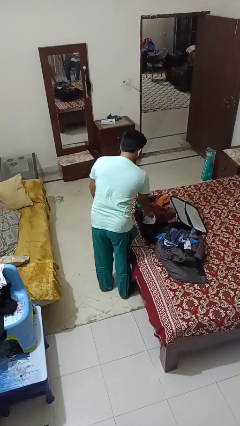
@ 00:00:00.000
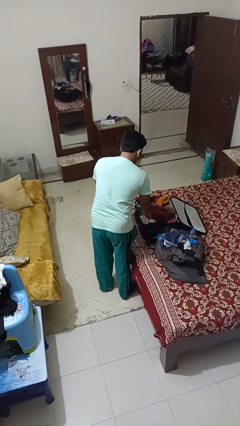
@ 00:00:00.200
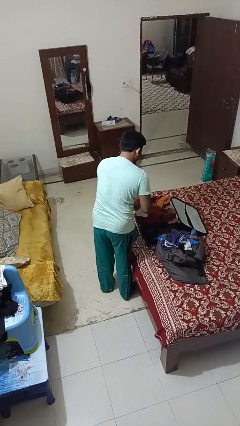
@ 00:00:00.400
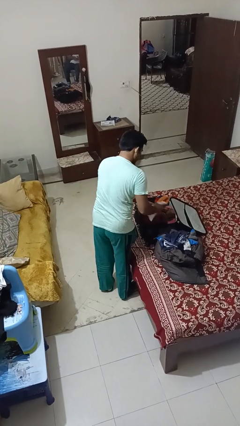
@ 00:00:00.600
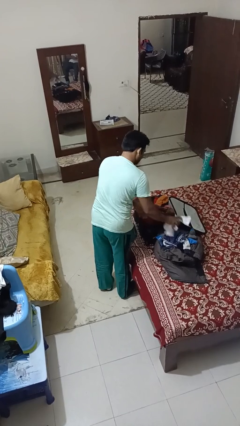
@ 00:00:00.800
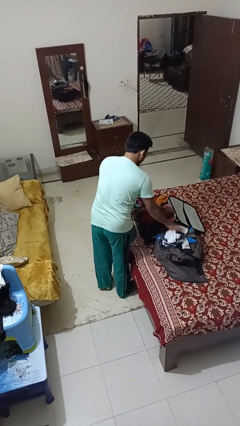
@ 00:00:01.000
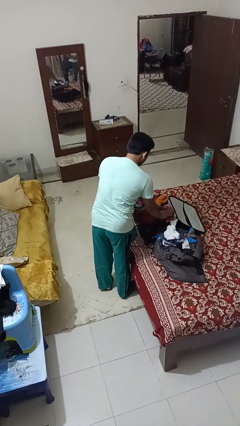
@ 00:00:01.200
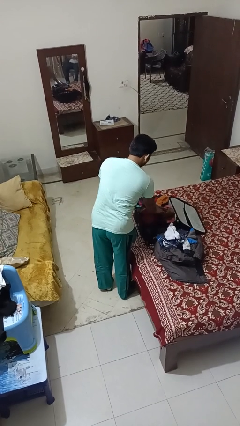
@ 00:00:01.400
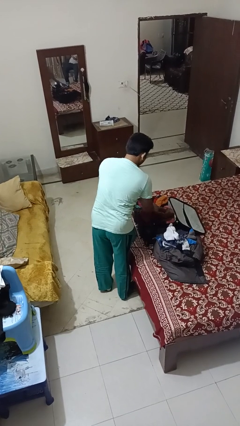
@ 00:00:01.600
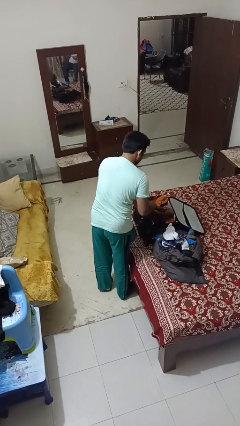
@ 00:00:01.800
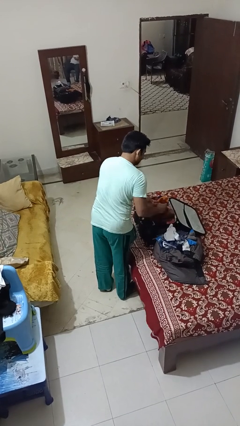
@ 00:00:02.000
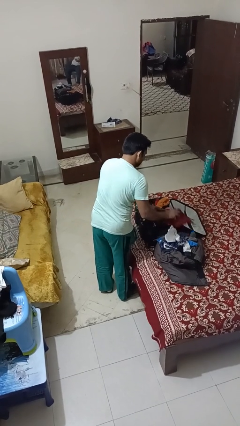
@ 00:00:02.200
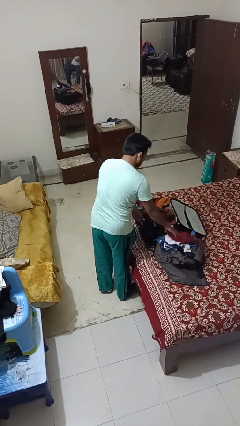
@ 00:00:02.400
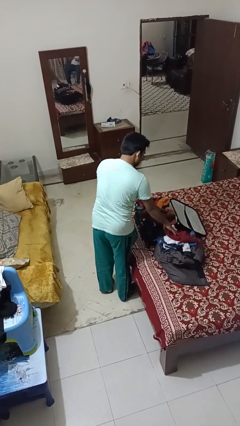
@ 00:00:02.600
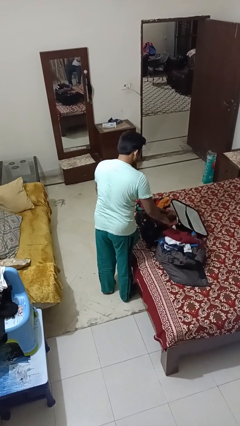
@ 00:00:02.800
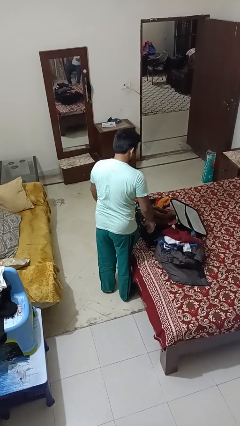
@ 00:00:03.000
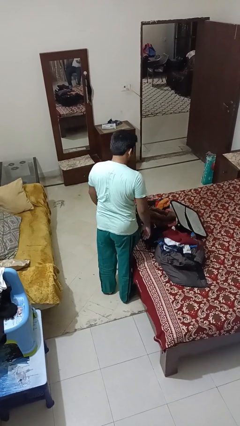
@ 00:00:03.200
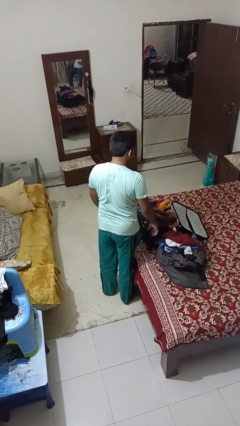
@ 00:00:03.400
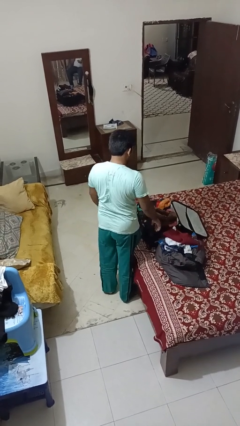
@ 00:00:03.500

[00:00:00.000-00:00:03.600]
person unloads clothes from suitcase

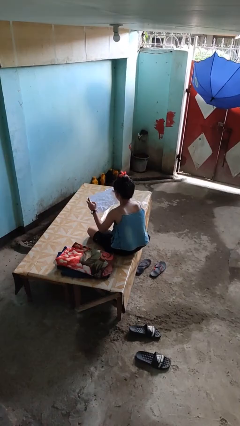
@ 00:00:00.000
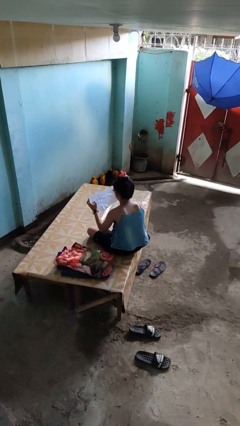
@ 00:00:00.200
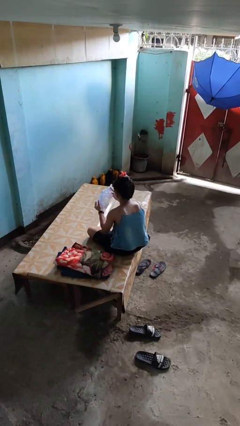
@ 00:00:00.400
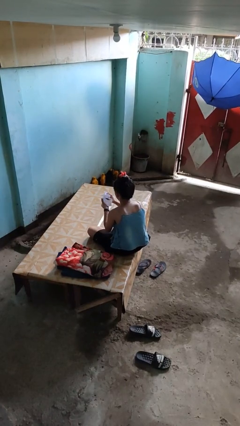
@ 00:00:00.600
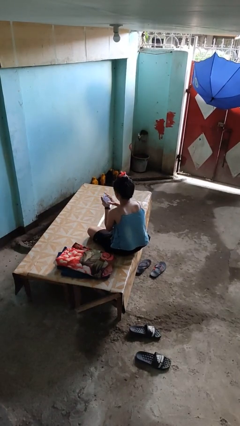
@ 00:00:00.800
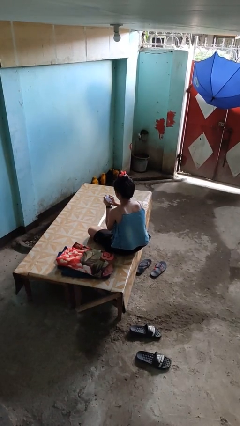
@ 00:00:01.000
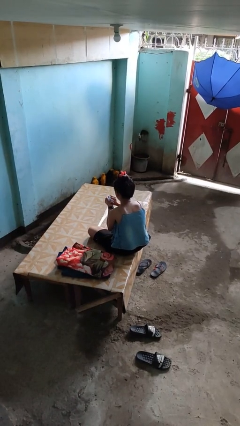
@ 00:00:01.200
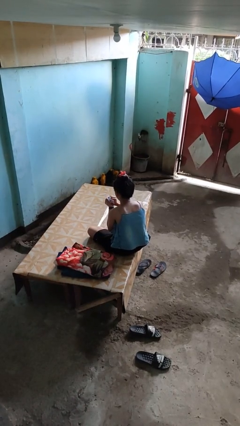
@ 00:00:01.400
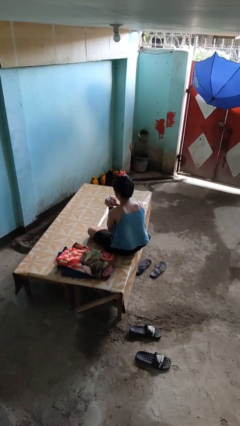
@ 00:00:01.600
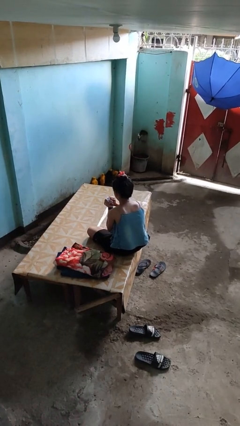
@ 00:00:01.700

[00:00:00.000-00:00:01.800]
person crumples paper

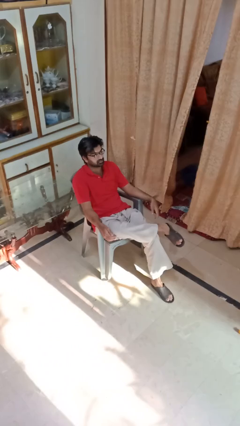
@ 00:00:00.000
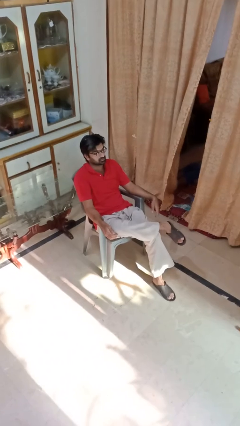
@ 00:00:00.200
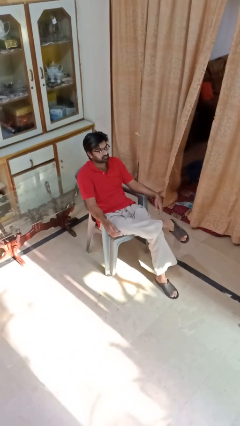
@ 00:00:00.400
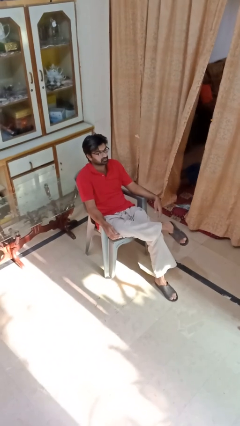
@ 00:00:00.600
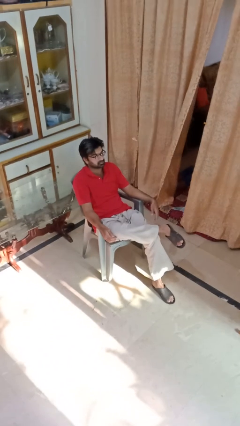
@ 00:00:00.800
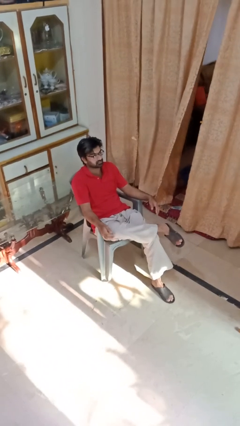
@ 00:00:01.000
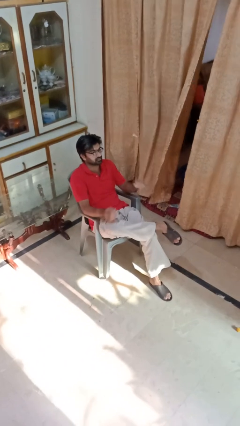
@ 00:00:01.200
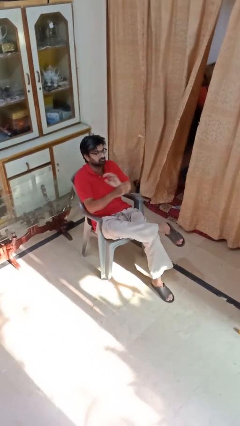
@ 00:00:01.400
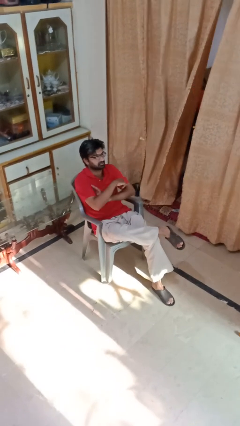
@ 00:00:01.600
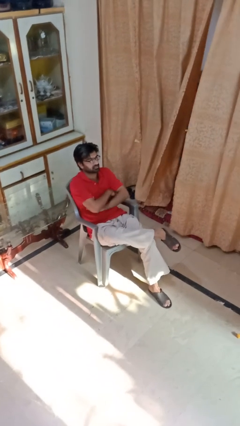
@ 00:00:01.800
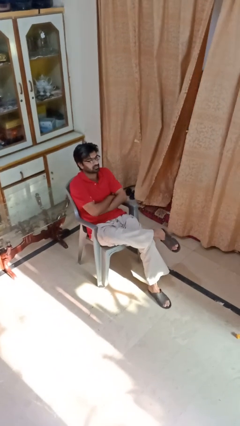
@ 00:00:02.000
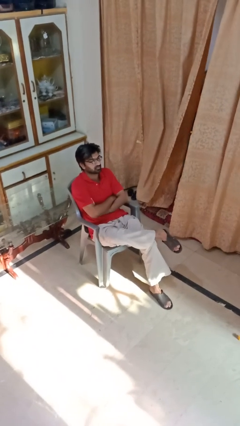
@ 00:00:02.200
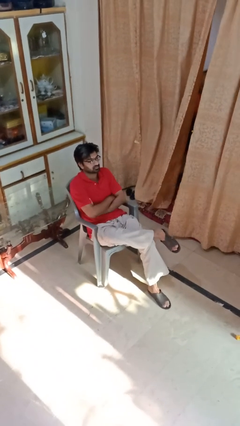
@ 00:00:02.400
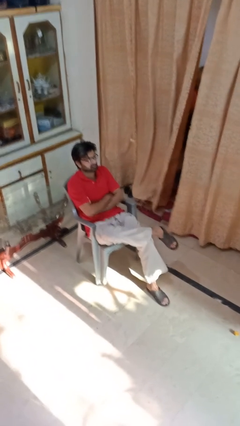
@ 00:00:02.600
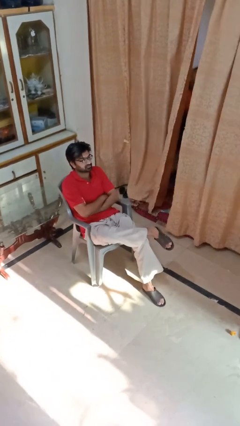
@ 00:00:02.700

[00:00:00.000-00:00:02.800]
person crosses arms

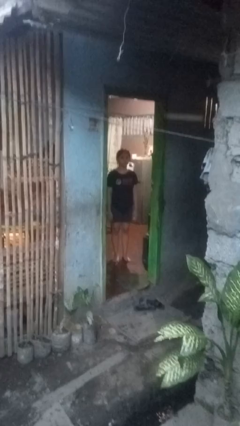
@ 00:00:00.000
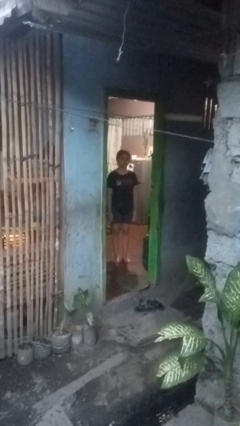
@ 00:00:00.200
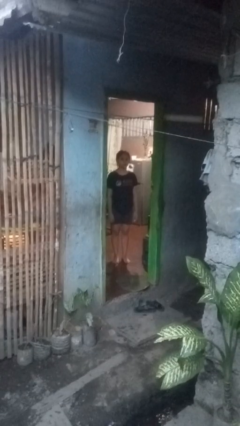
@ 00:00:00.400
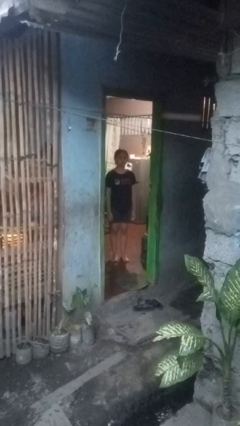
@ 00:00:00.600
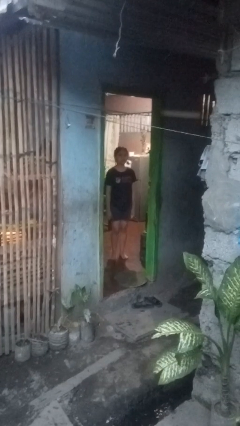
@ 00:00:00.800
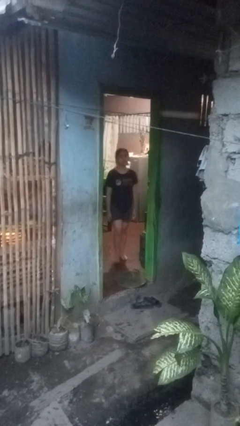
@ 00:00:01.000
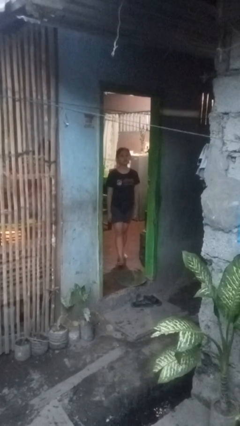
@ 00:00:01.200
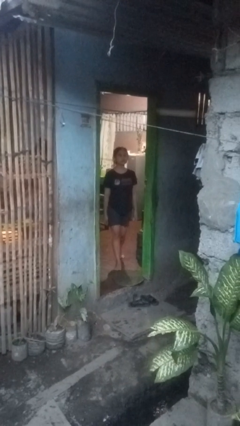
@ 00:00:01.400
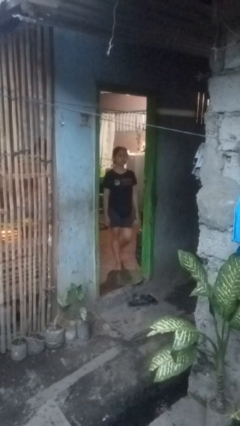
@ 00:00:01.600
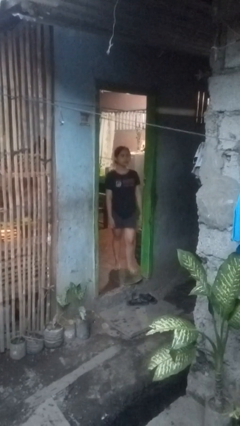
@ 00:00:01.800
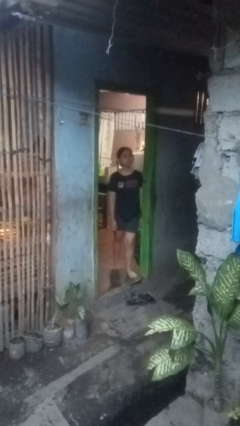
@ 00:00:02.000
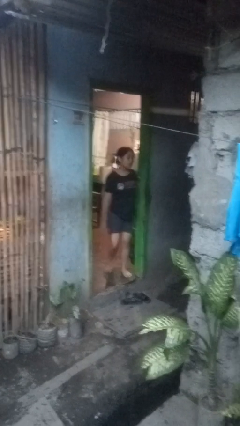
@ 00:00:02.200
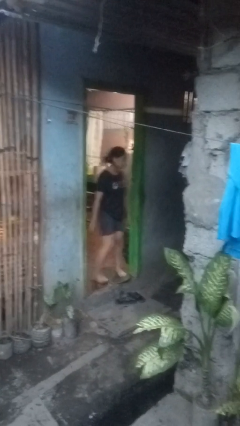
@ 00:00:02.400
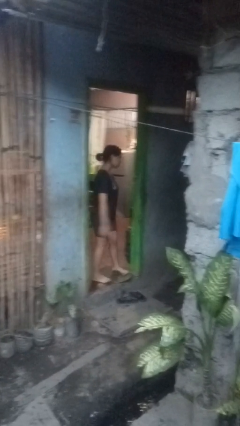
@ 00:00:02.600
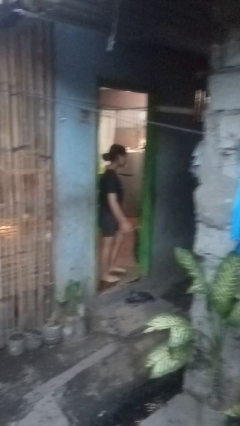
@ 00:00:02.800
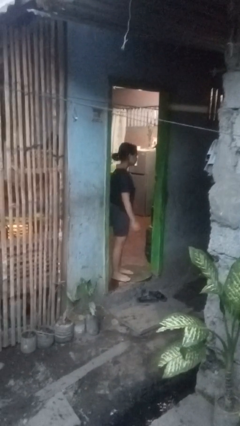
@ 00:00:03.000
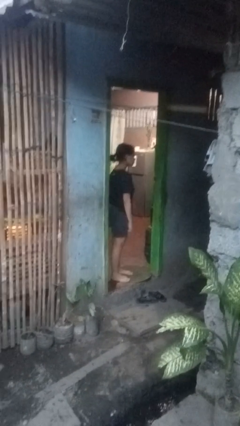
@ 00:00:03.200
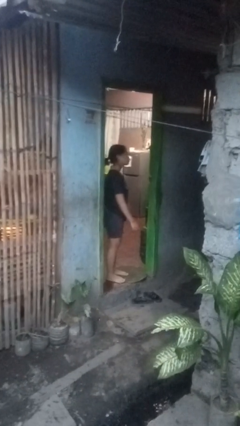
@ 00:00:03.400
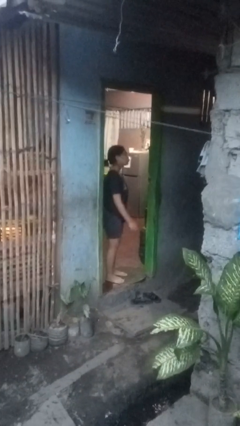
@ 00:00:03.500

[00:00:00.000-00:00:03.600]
person bumps into wall

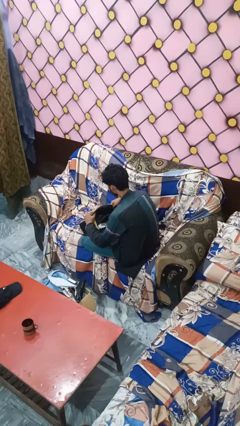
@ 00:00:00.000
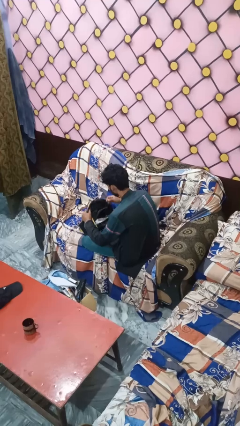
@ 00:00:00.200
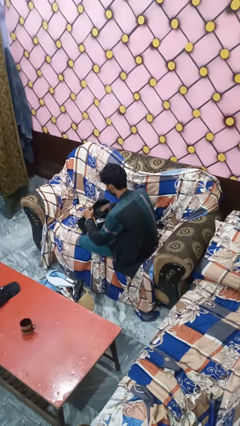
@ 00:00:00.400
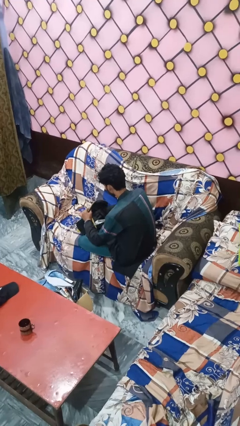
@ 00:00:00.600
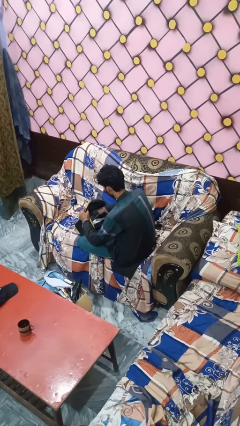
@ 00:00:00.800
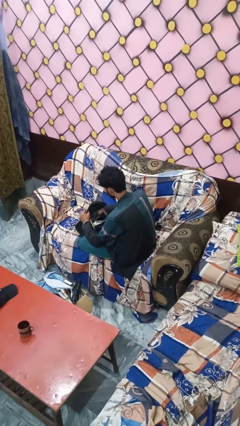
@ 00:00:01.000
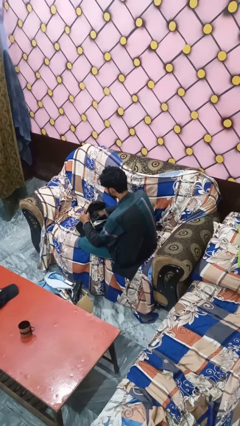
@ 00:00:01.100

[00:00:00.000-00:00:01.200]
person searches in bag

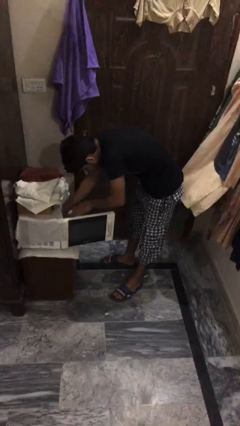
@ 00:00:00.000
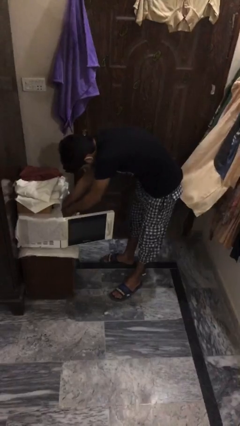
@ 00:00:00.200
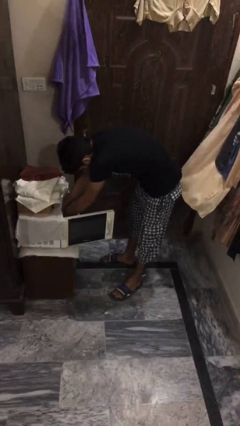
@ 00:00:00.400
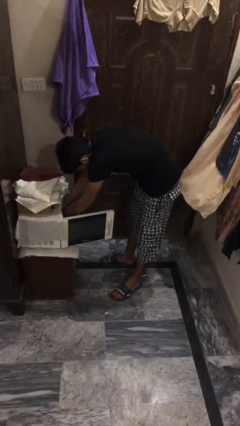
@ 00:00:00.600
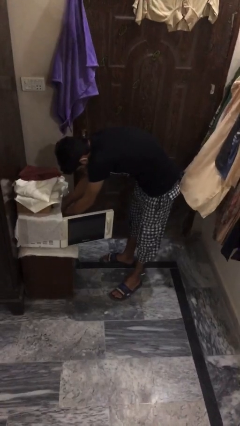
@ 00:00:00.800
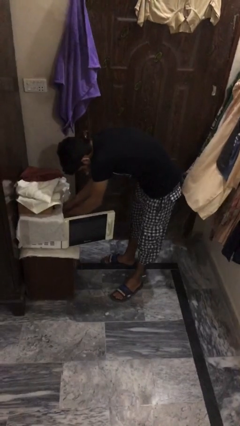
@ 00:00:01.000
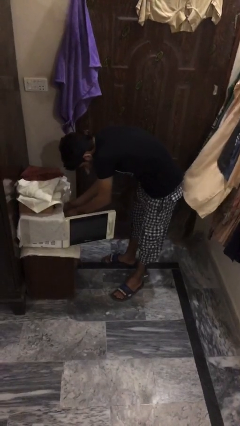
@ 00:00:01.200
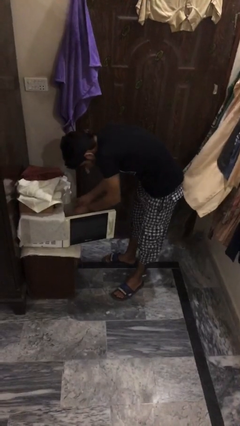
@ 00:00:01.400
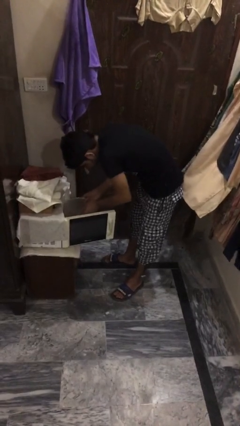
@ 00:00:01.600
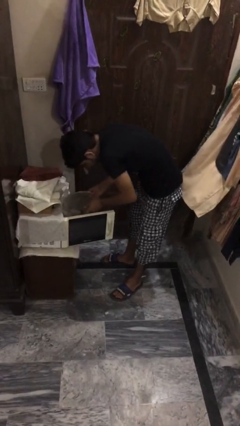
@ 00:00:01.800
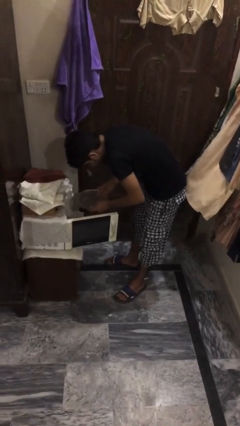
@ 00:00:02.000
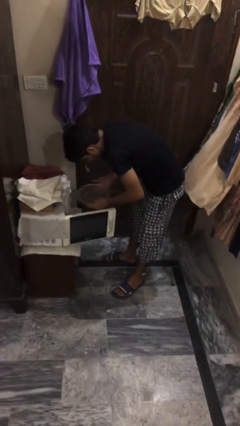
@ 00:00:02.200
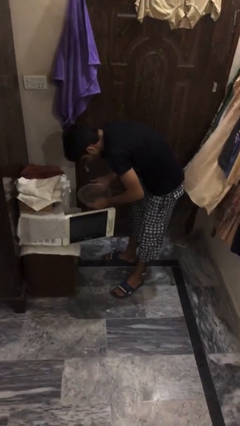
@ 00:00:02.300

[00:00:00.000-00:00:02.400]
person takes object from oven

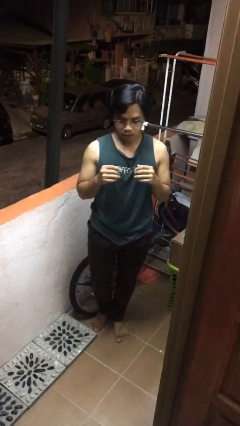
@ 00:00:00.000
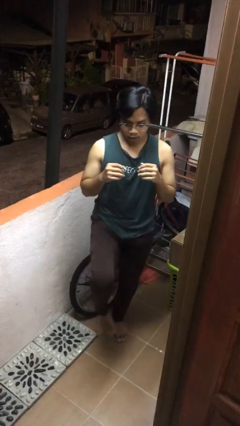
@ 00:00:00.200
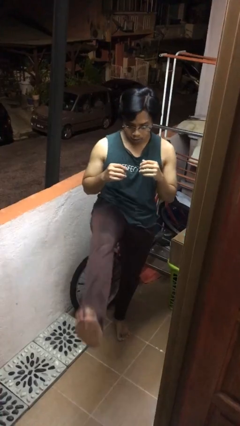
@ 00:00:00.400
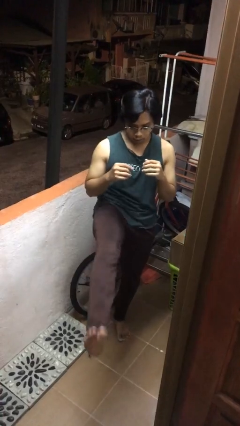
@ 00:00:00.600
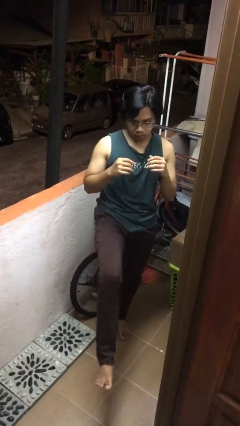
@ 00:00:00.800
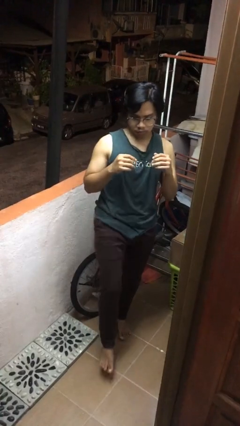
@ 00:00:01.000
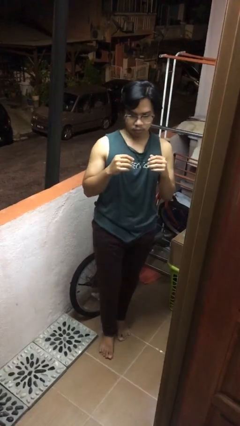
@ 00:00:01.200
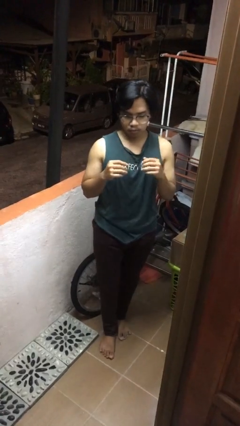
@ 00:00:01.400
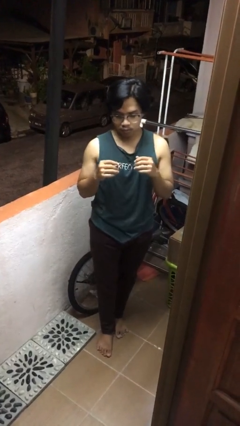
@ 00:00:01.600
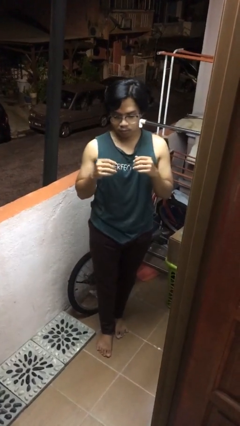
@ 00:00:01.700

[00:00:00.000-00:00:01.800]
person karate kicks
